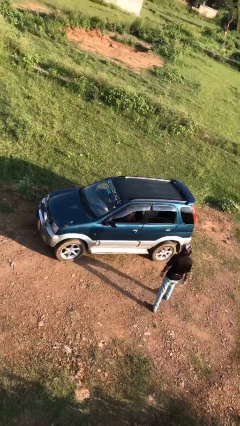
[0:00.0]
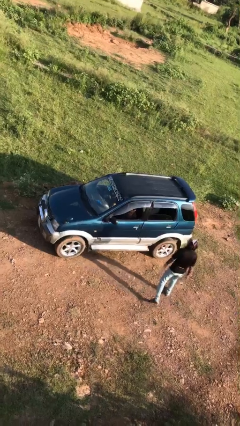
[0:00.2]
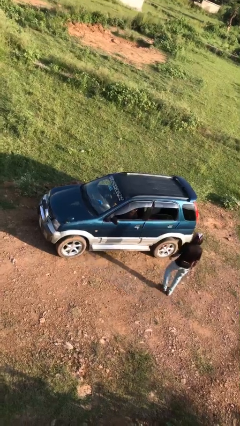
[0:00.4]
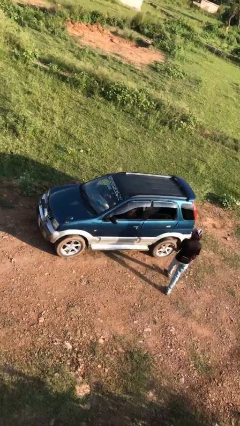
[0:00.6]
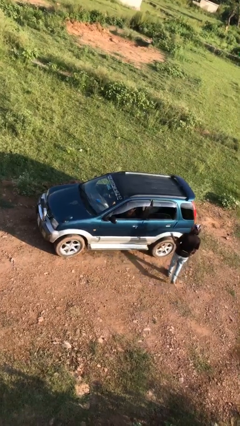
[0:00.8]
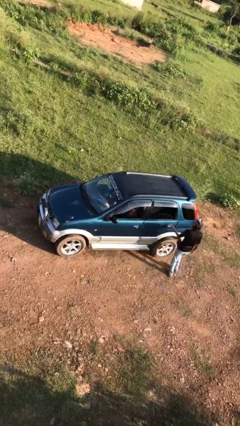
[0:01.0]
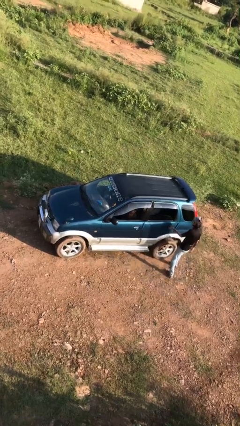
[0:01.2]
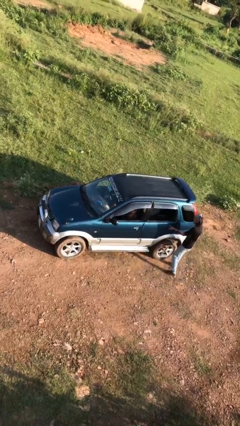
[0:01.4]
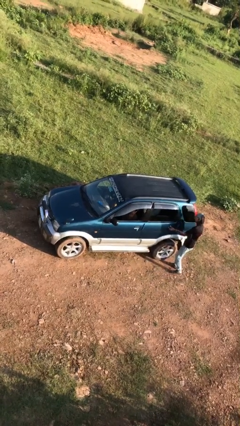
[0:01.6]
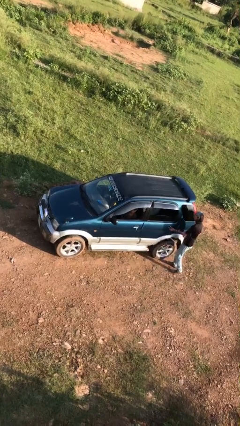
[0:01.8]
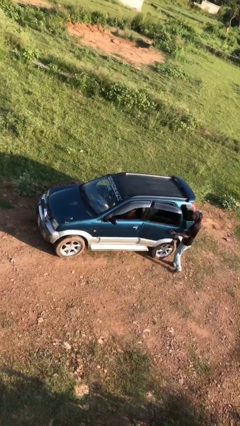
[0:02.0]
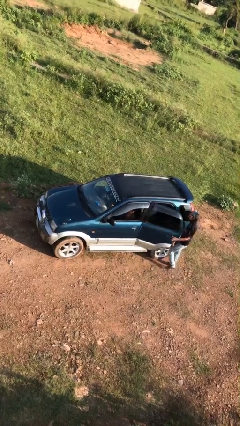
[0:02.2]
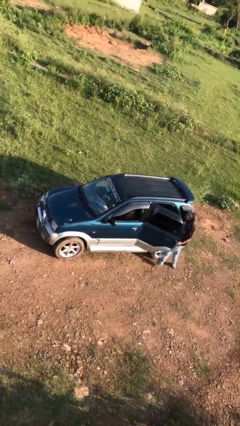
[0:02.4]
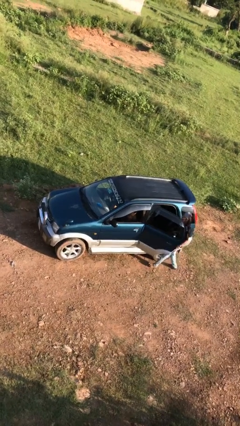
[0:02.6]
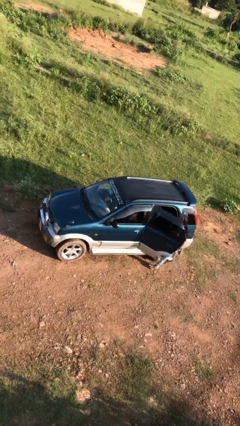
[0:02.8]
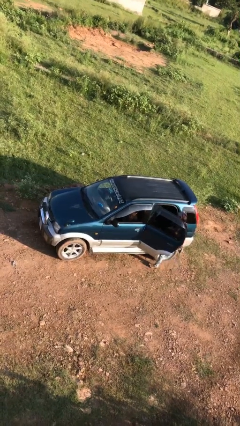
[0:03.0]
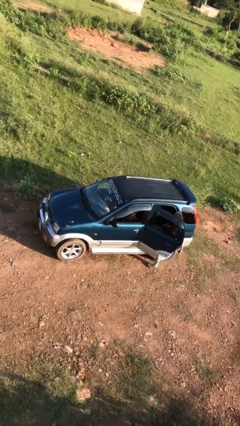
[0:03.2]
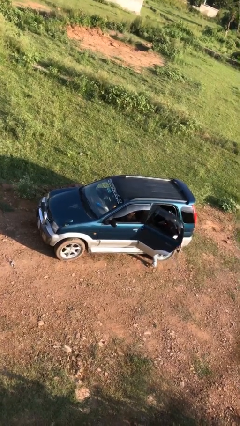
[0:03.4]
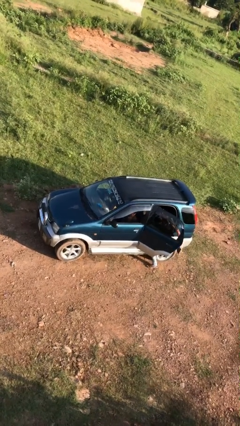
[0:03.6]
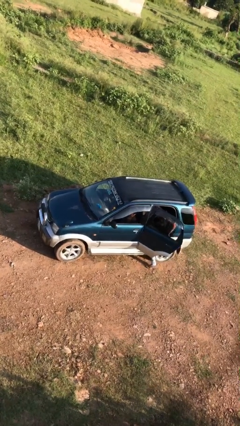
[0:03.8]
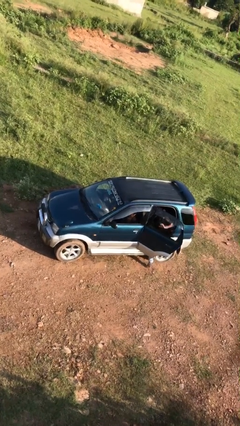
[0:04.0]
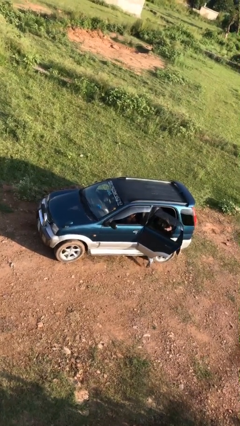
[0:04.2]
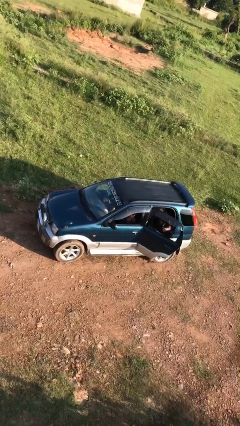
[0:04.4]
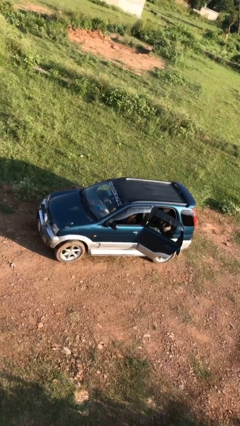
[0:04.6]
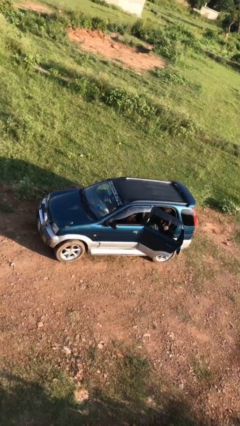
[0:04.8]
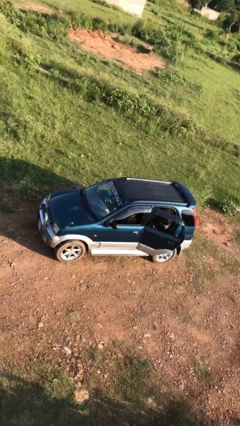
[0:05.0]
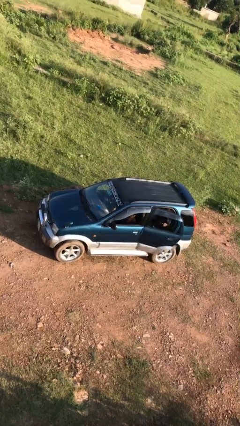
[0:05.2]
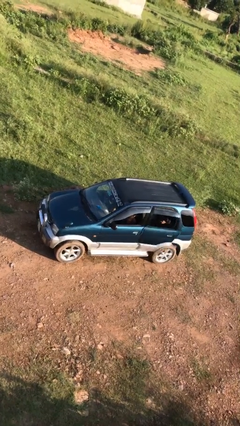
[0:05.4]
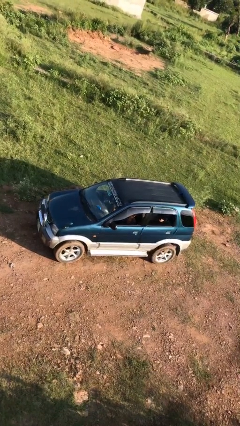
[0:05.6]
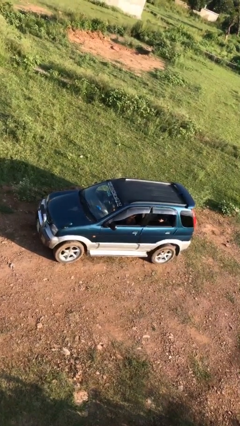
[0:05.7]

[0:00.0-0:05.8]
car picks up person

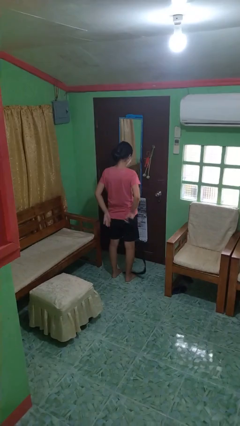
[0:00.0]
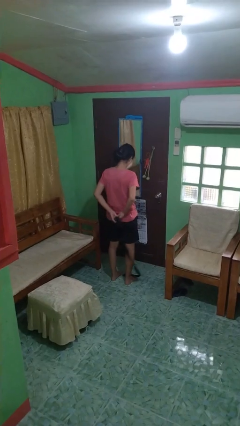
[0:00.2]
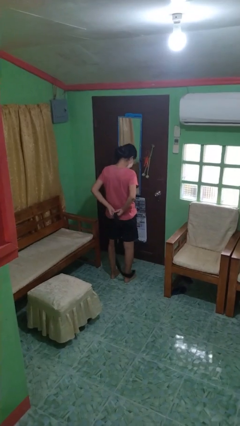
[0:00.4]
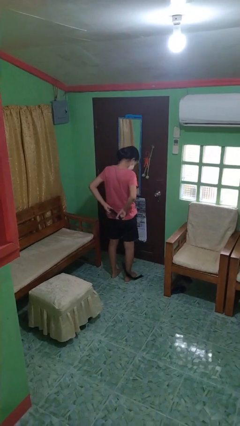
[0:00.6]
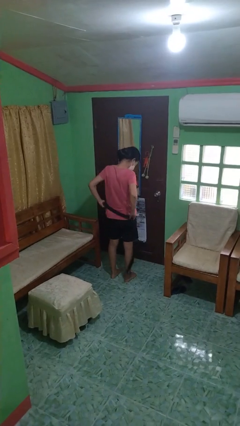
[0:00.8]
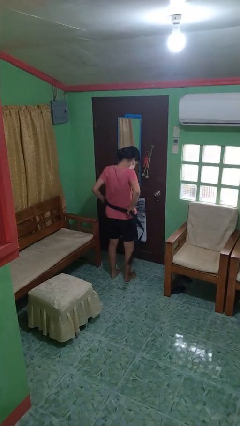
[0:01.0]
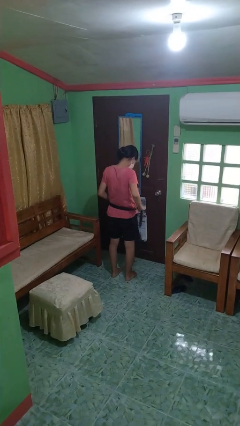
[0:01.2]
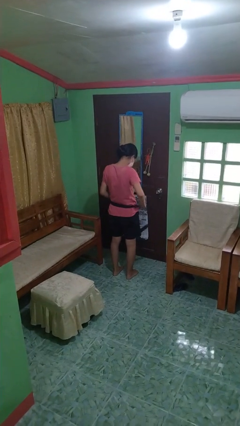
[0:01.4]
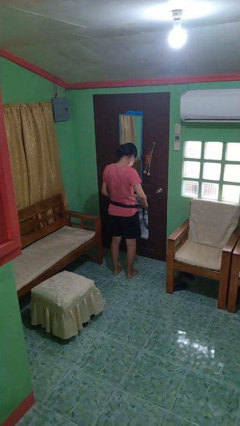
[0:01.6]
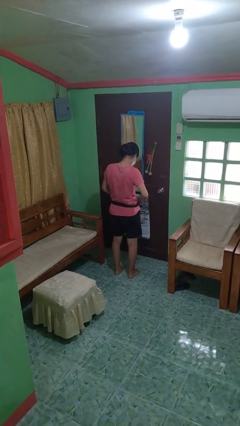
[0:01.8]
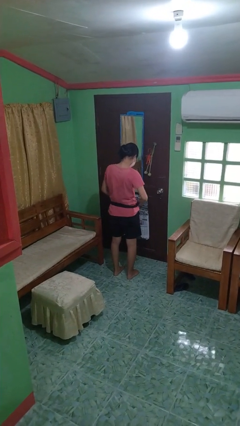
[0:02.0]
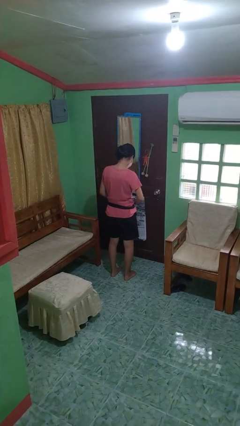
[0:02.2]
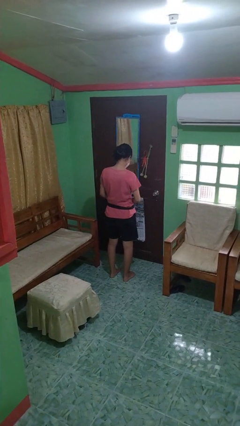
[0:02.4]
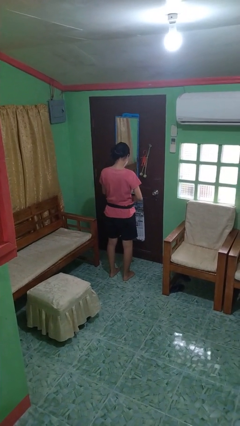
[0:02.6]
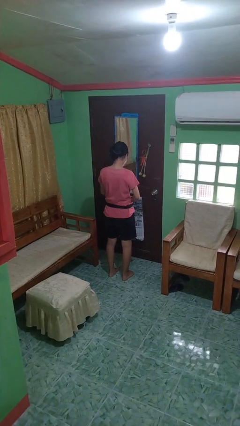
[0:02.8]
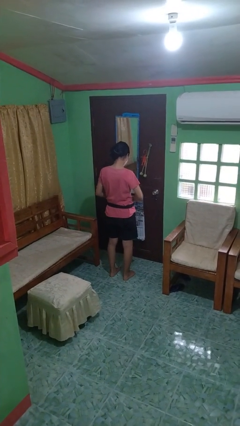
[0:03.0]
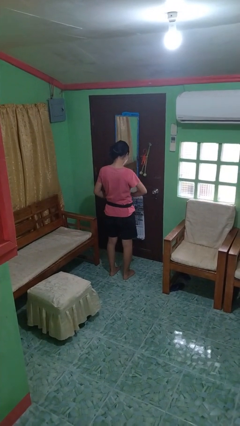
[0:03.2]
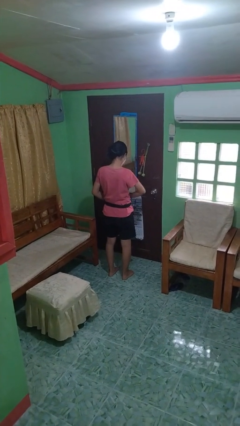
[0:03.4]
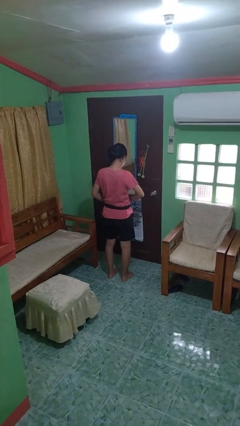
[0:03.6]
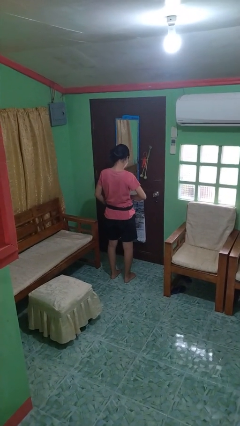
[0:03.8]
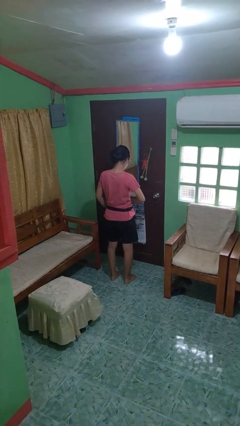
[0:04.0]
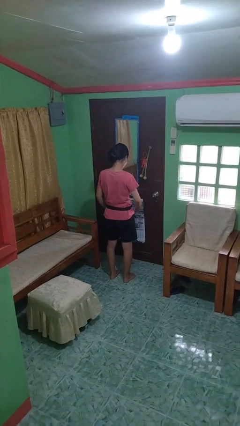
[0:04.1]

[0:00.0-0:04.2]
person puts on belt

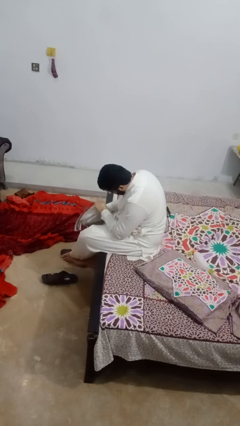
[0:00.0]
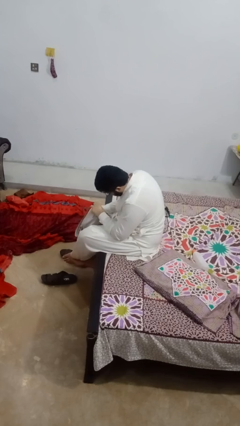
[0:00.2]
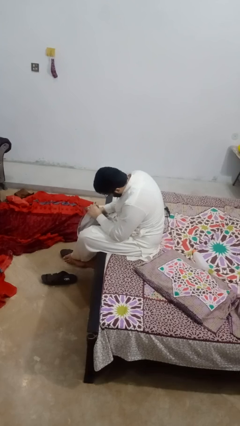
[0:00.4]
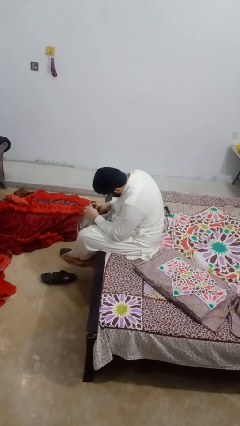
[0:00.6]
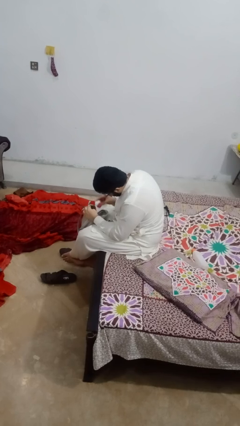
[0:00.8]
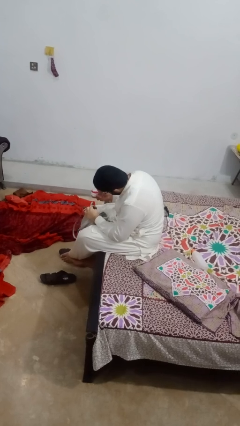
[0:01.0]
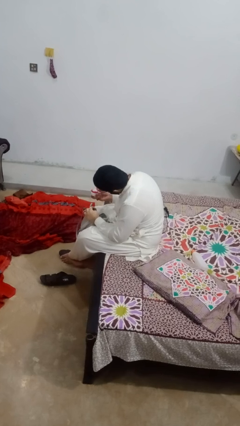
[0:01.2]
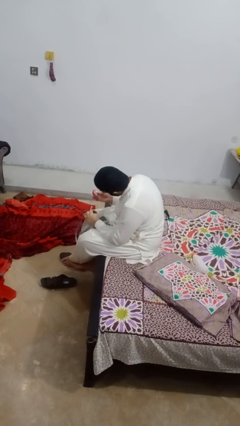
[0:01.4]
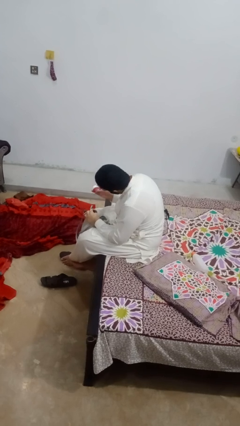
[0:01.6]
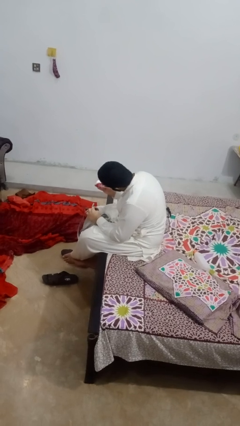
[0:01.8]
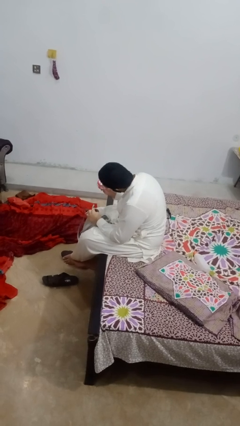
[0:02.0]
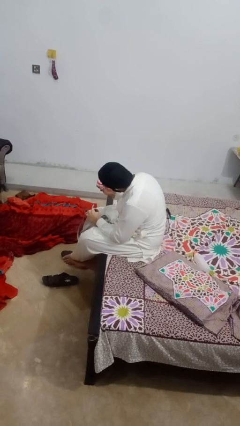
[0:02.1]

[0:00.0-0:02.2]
person takes object from purse

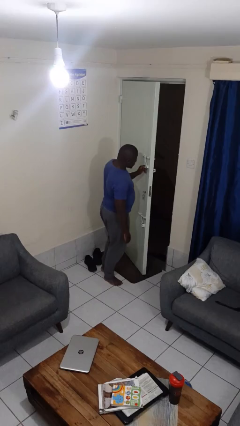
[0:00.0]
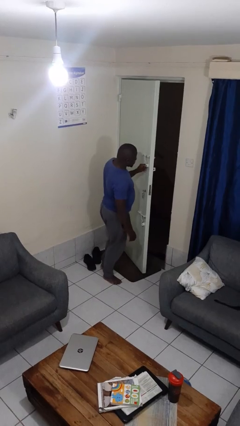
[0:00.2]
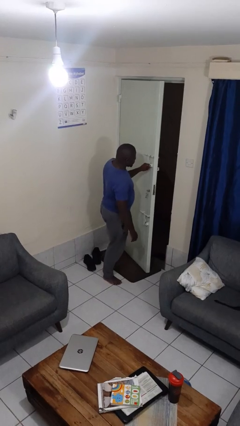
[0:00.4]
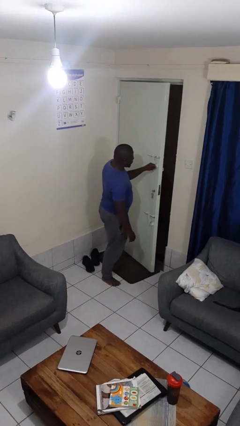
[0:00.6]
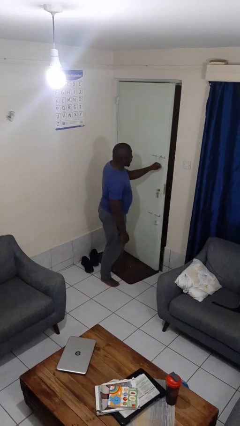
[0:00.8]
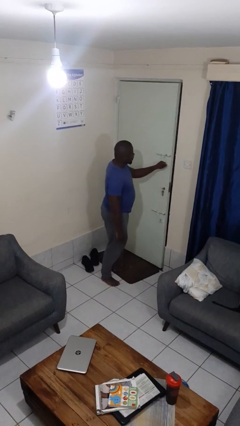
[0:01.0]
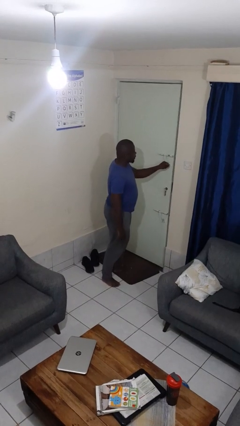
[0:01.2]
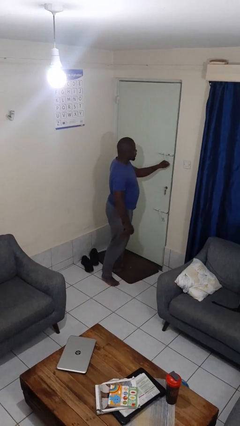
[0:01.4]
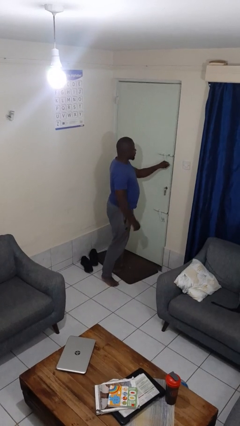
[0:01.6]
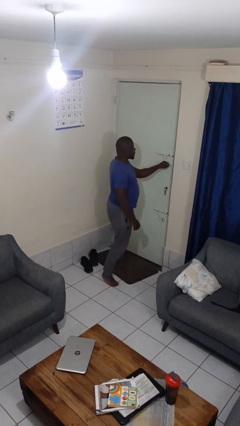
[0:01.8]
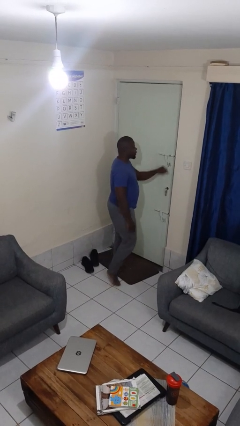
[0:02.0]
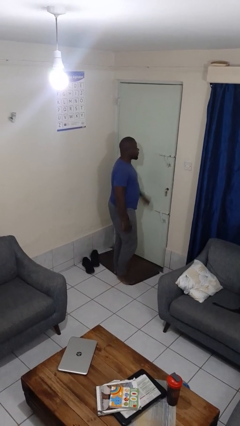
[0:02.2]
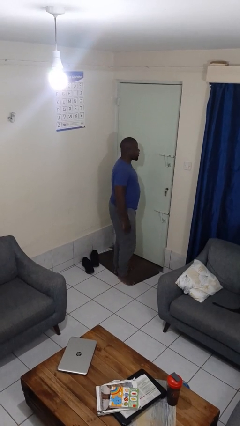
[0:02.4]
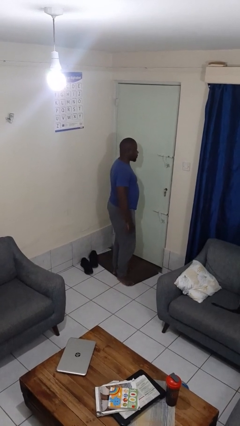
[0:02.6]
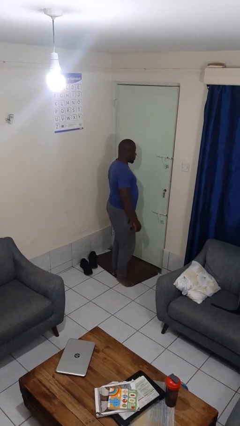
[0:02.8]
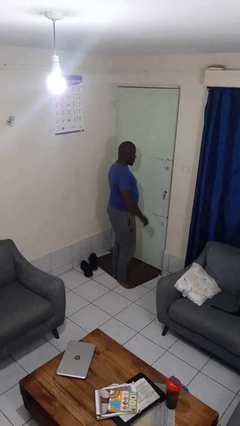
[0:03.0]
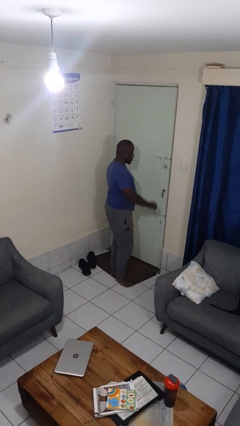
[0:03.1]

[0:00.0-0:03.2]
person closes facility door

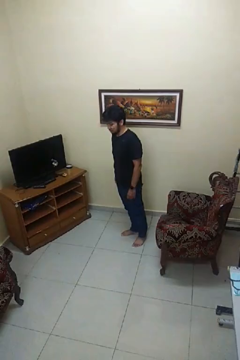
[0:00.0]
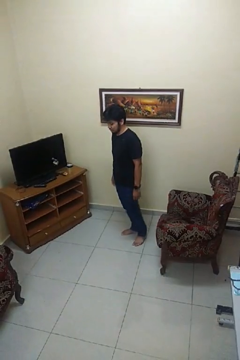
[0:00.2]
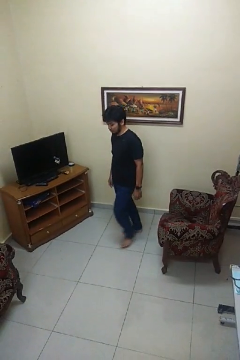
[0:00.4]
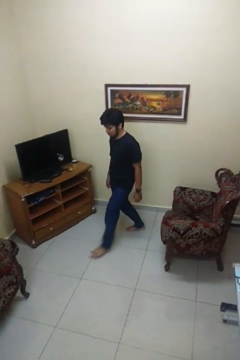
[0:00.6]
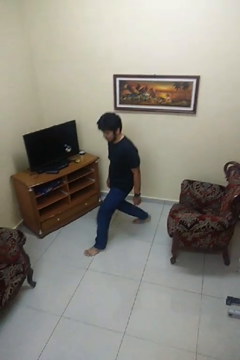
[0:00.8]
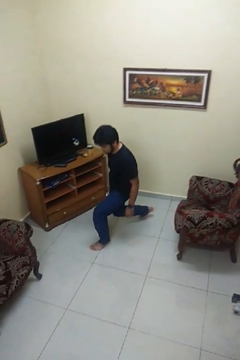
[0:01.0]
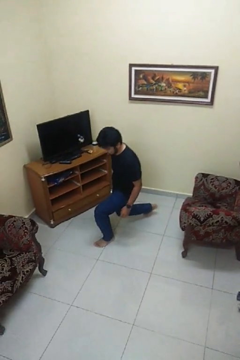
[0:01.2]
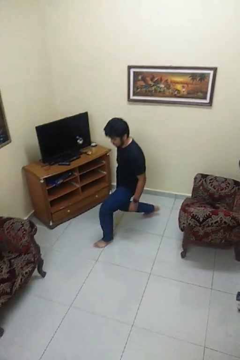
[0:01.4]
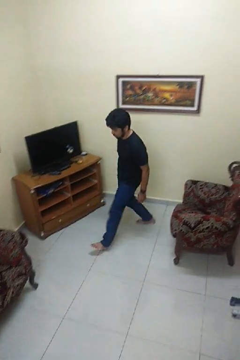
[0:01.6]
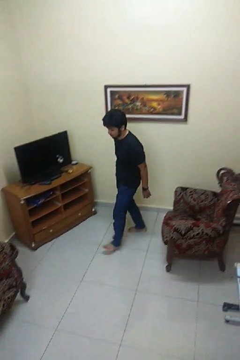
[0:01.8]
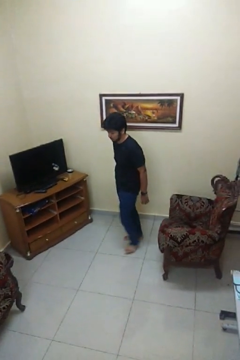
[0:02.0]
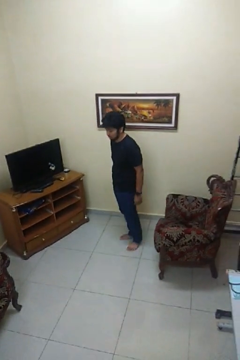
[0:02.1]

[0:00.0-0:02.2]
person exercises with lunges
